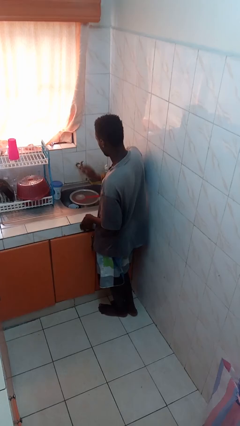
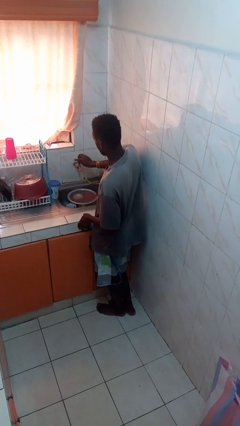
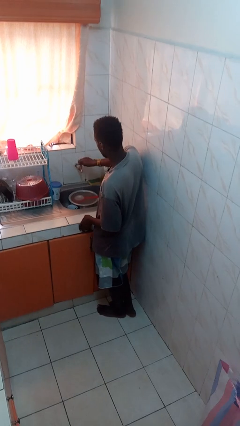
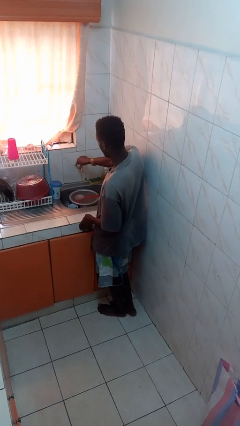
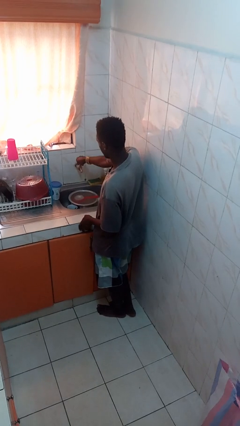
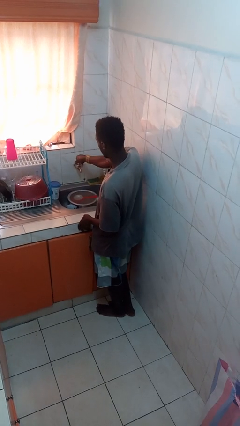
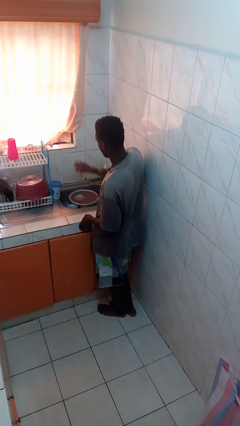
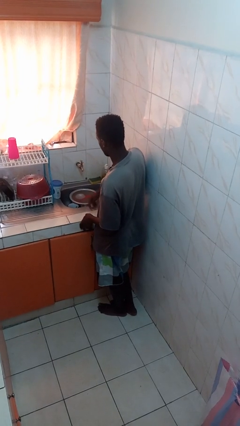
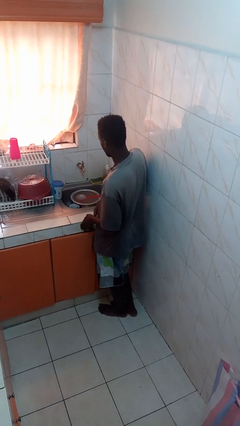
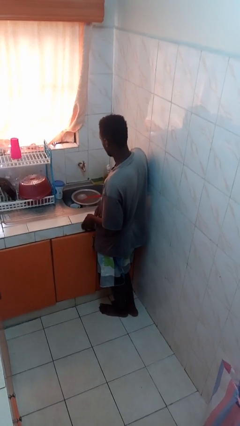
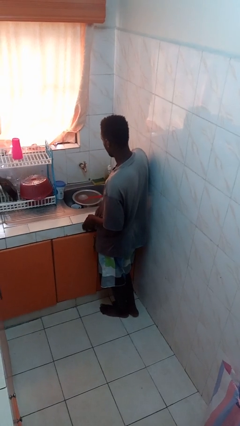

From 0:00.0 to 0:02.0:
person turns off faucet

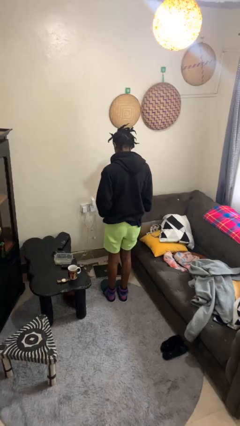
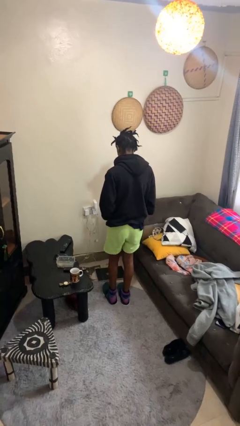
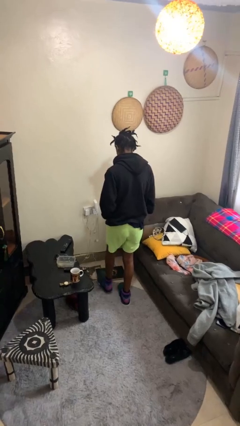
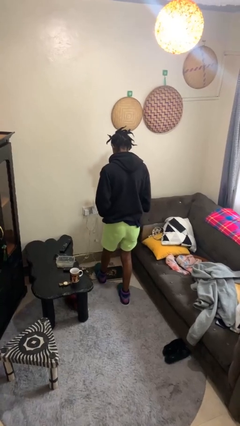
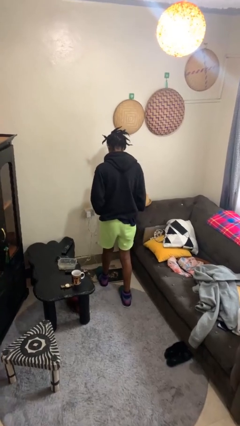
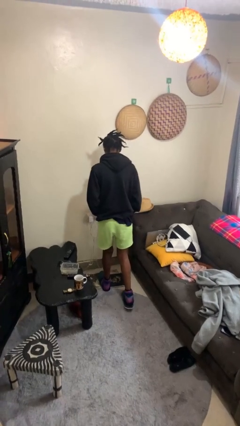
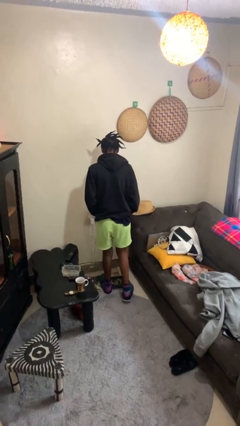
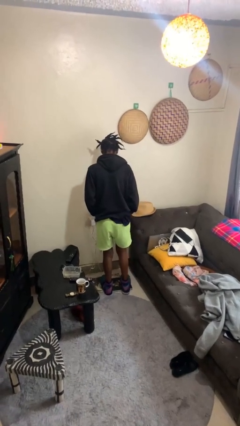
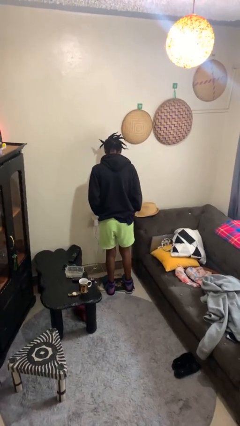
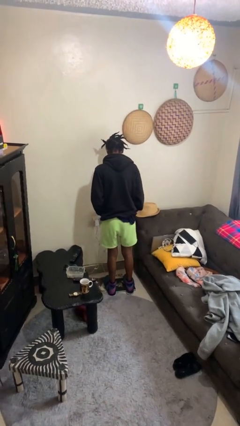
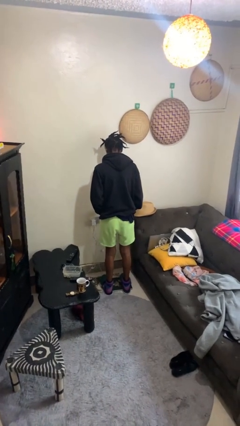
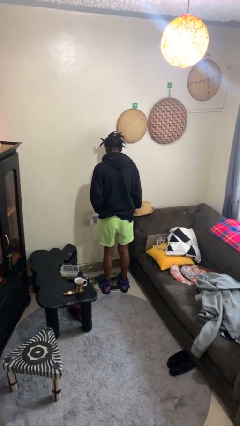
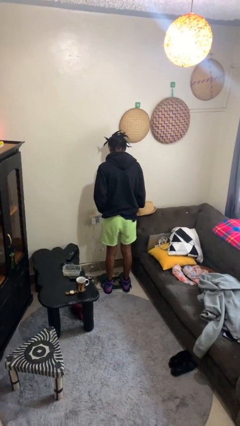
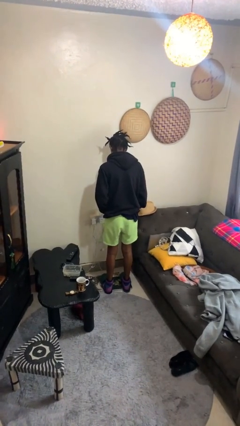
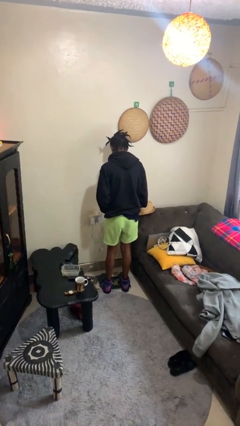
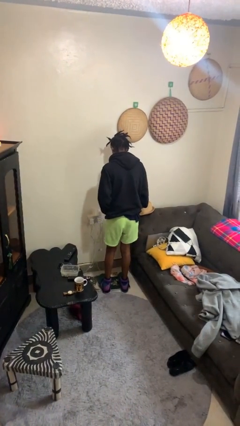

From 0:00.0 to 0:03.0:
person uses bodyweight scale

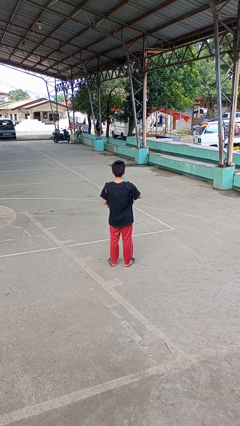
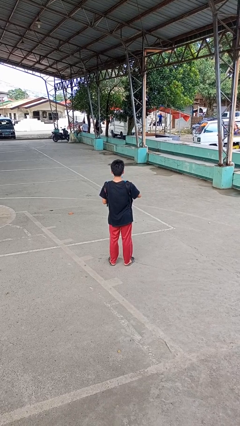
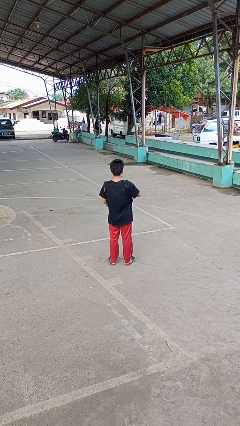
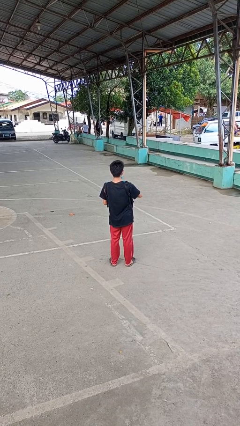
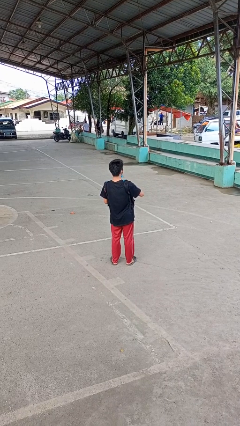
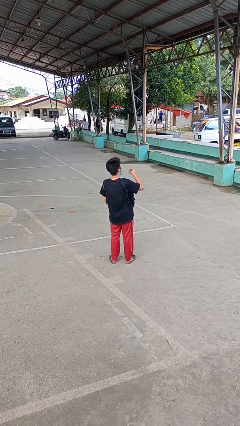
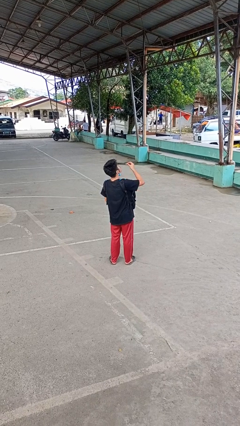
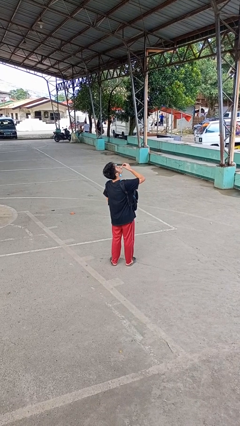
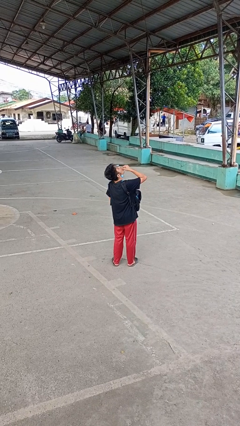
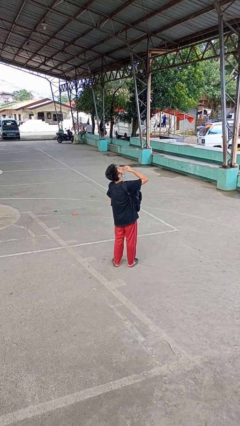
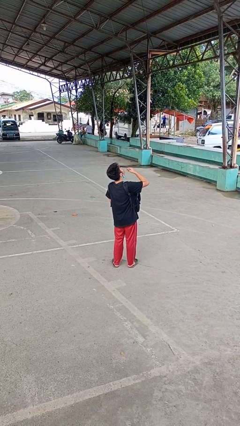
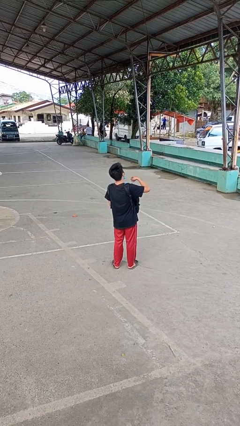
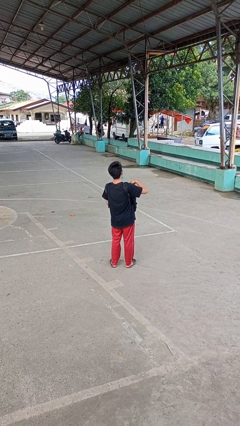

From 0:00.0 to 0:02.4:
person eats snack from bag

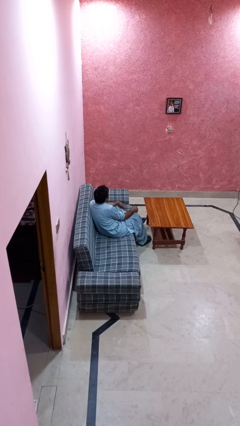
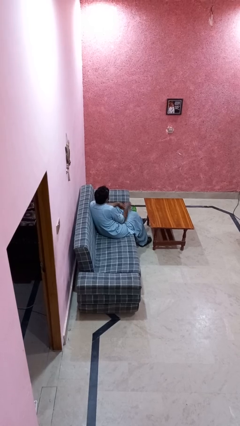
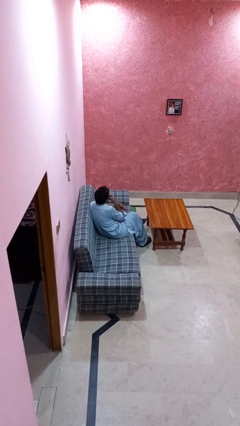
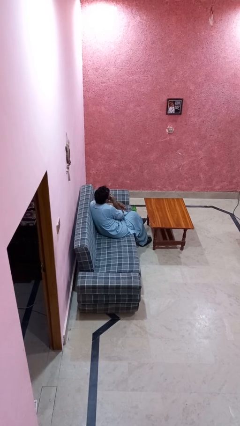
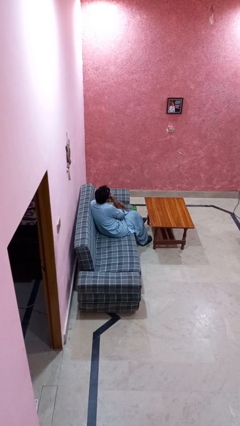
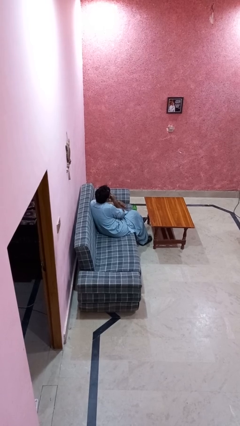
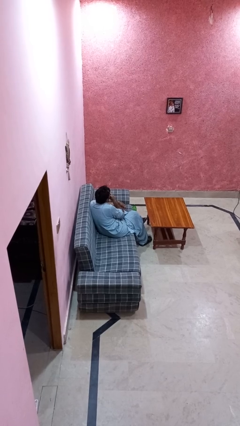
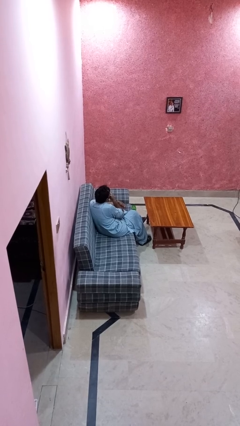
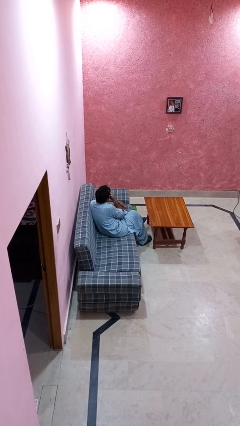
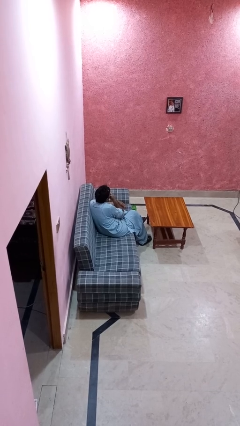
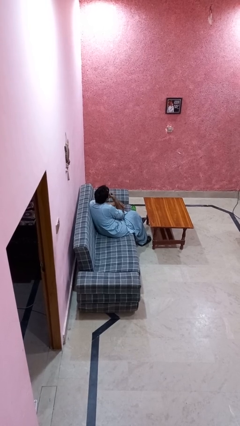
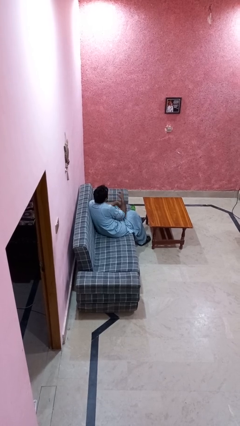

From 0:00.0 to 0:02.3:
person strokes chin

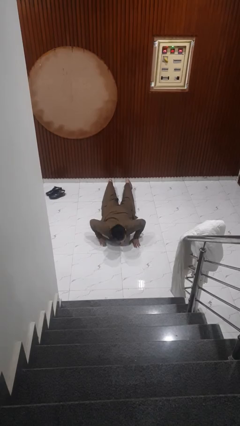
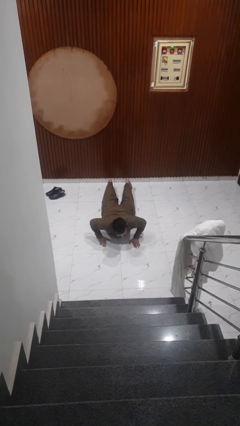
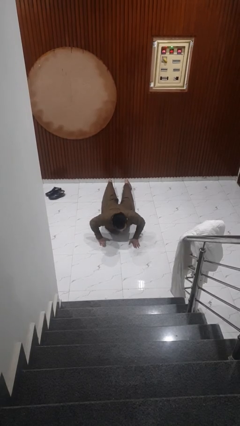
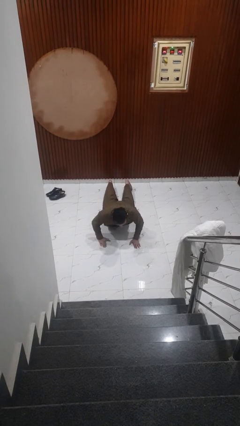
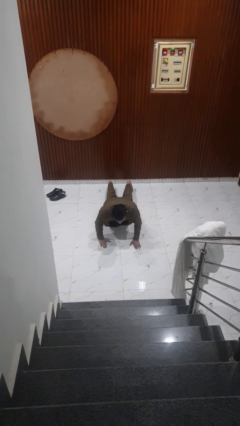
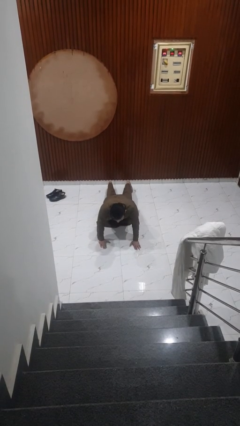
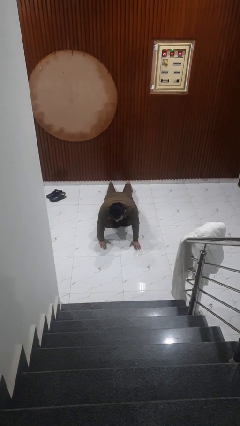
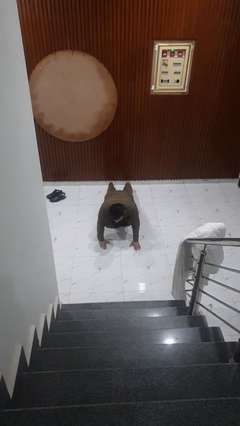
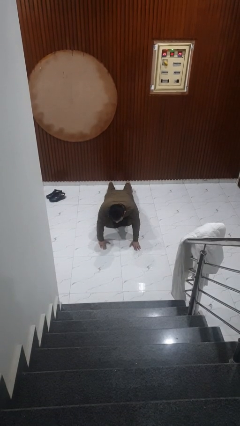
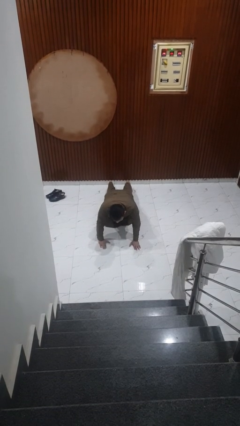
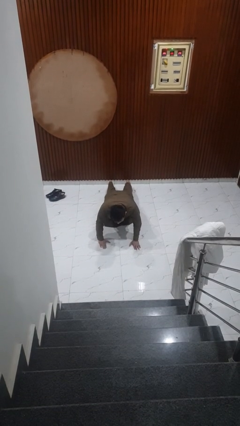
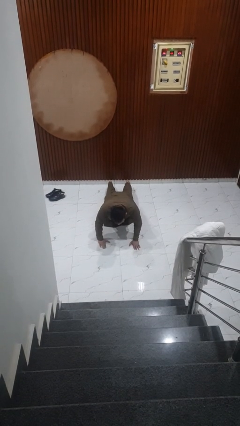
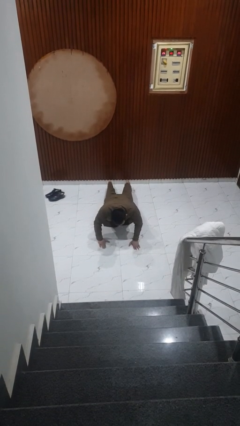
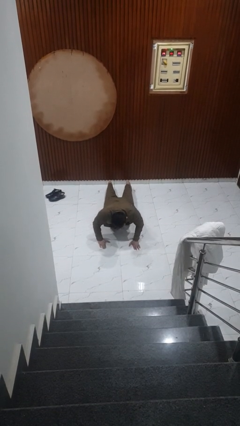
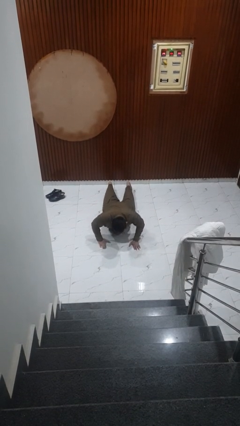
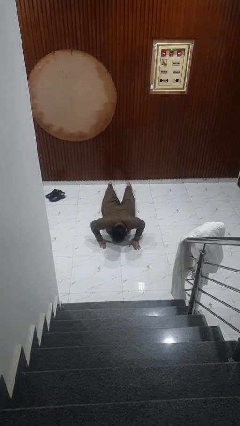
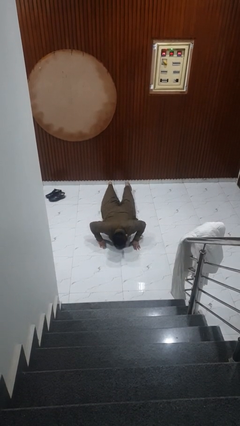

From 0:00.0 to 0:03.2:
person exercises with pushup

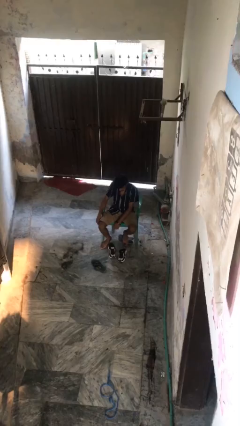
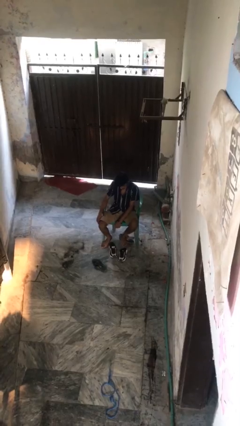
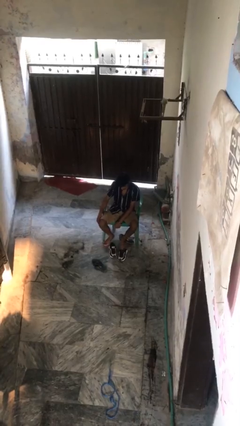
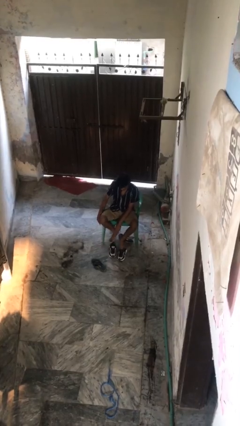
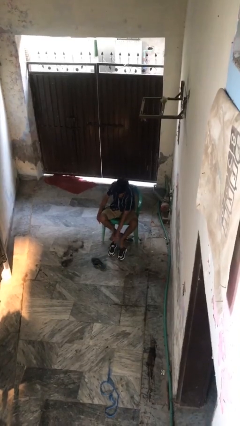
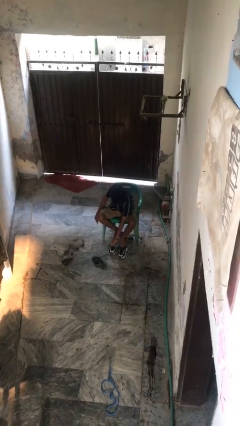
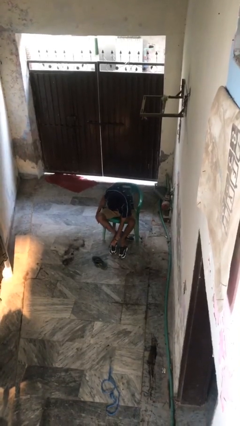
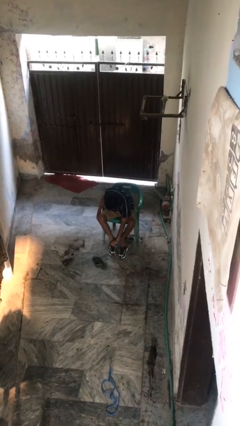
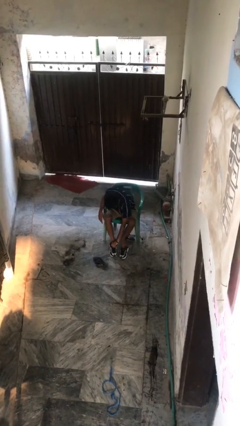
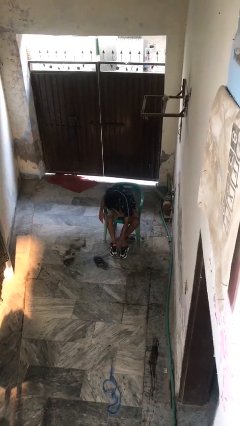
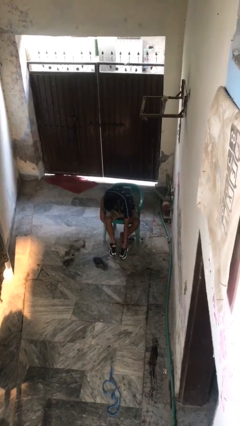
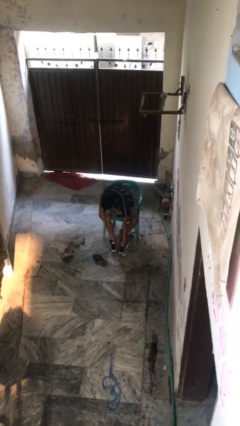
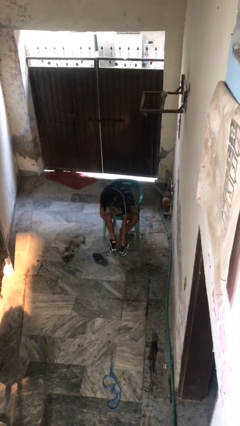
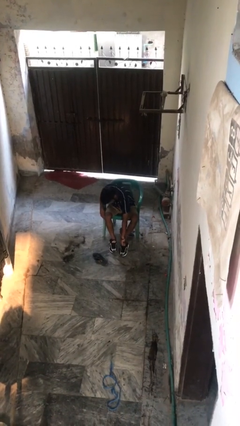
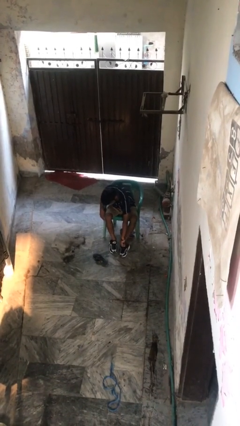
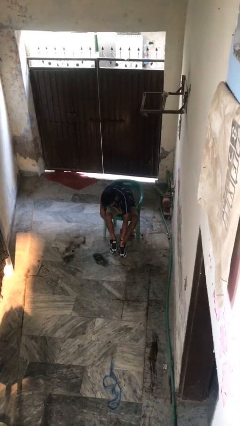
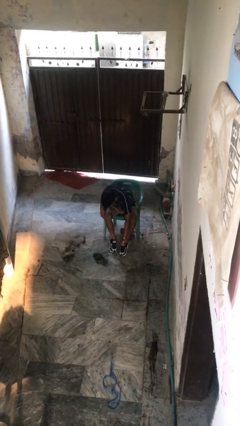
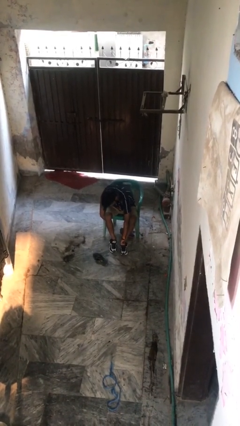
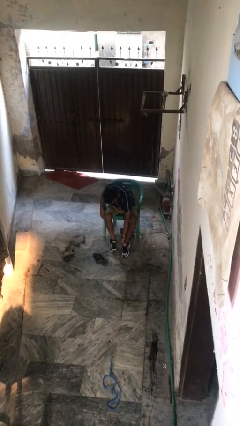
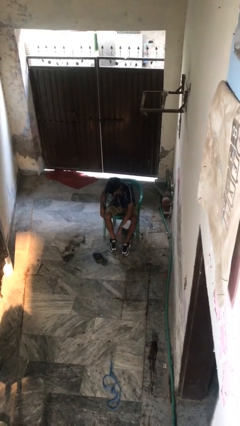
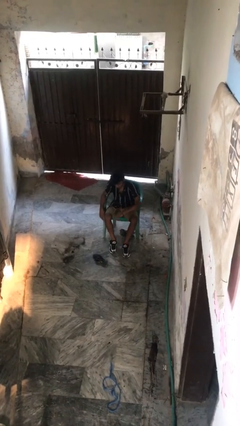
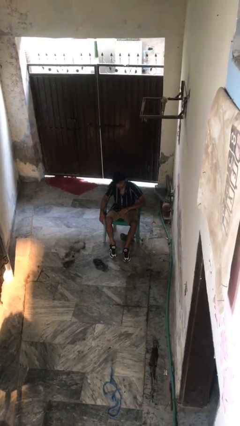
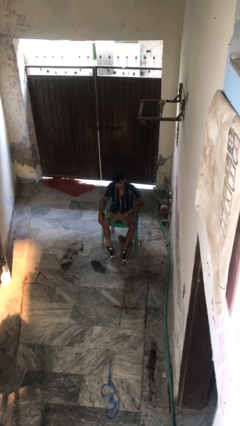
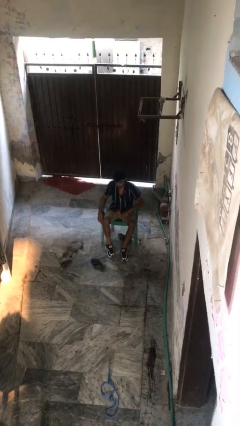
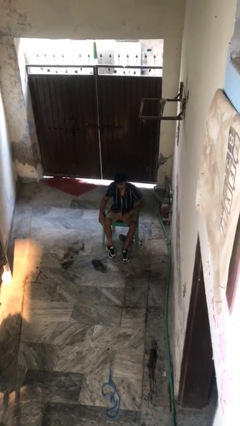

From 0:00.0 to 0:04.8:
person puts on shoes
